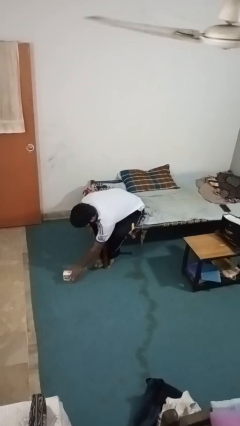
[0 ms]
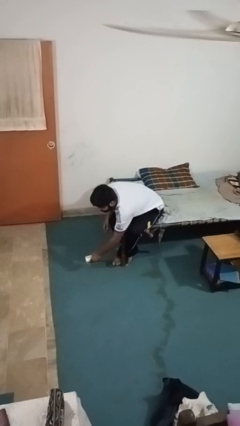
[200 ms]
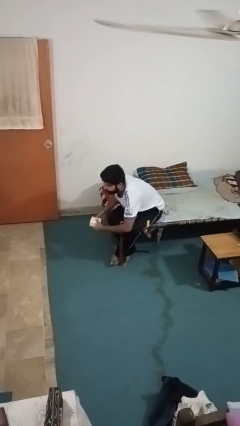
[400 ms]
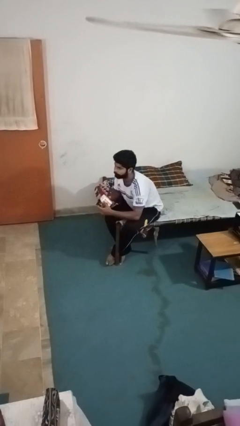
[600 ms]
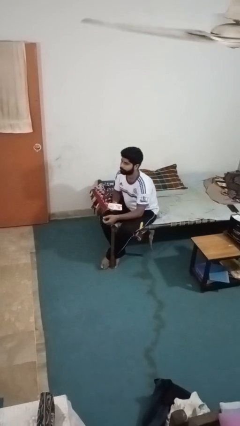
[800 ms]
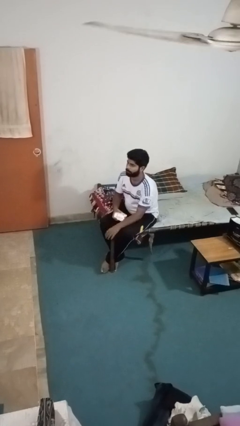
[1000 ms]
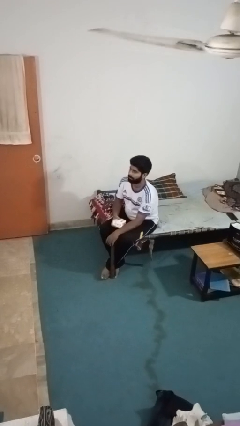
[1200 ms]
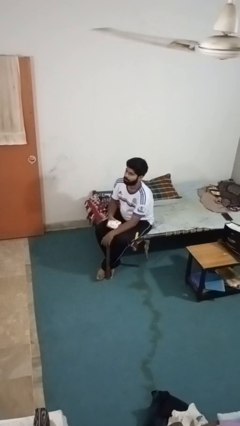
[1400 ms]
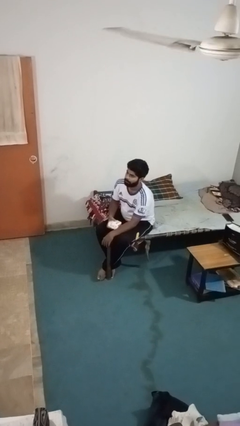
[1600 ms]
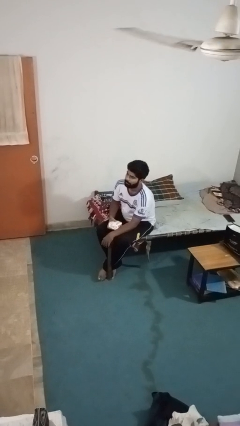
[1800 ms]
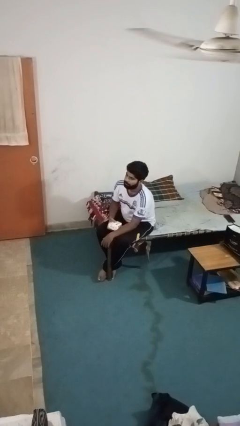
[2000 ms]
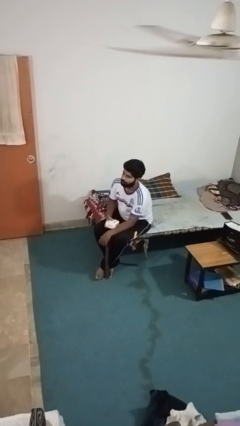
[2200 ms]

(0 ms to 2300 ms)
person picks up object from floor

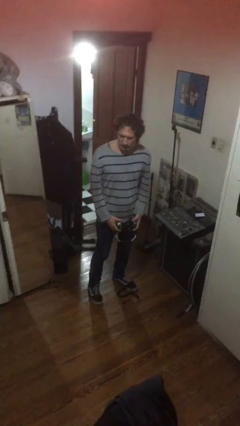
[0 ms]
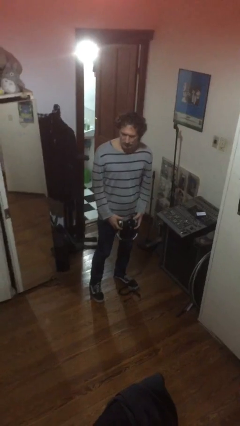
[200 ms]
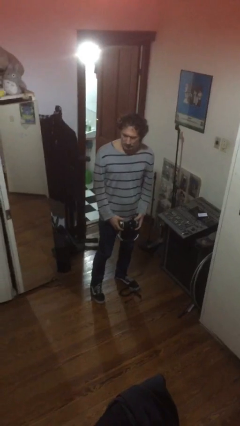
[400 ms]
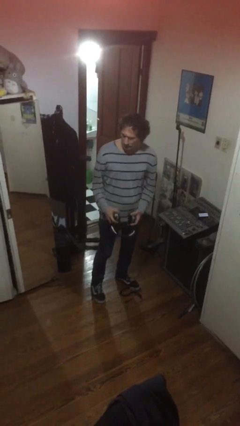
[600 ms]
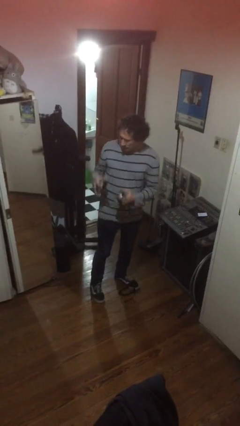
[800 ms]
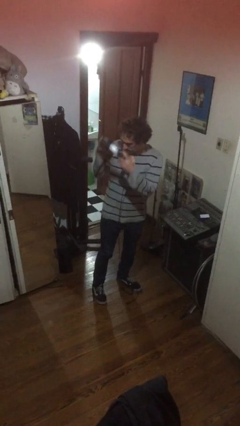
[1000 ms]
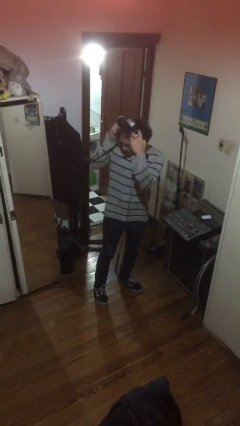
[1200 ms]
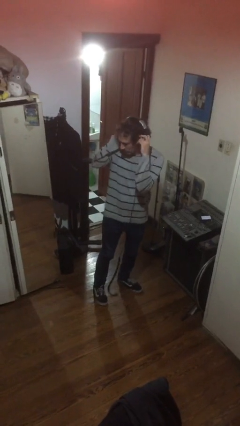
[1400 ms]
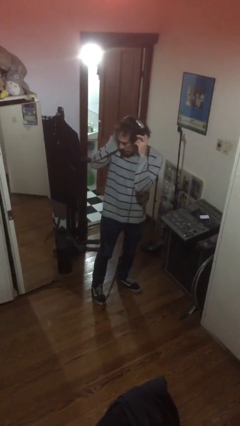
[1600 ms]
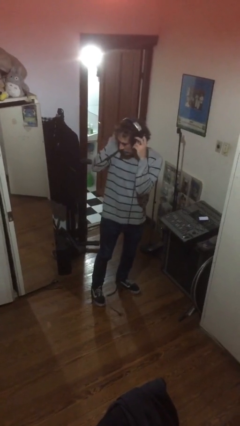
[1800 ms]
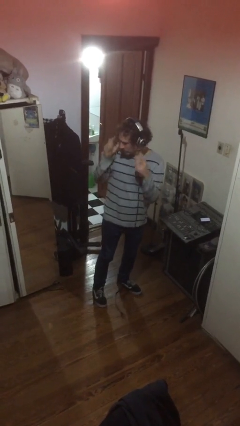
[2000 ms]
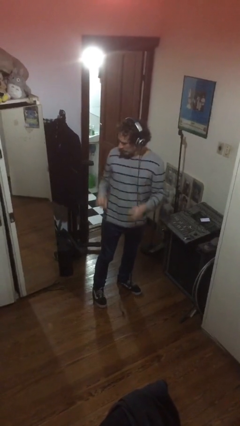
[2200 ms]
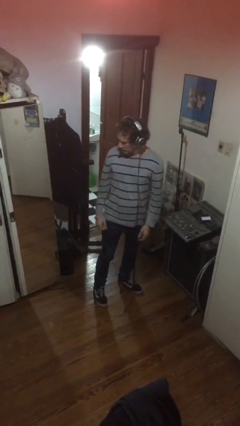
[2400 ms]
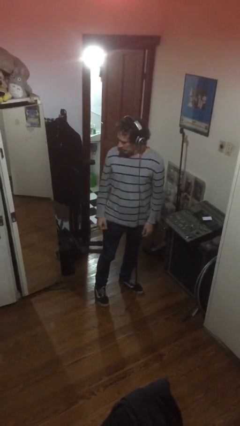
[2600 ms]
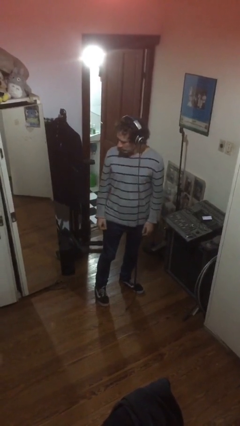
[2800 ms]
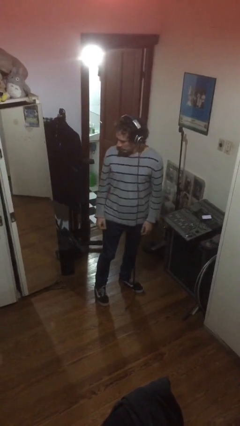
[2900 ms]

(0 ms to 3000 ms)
person puts on headphones

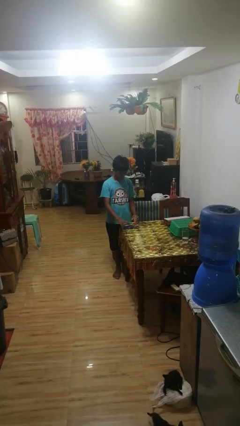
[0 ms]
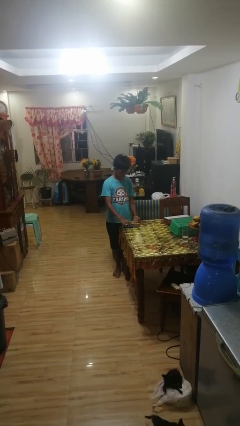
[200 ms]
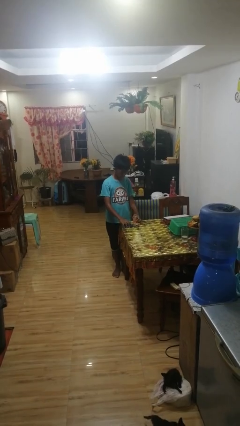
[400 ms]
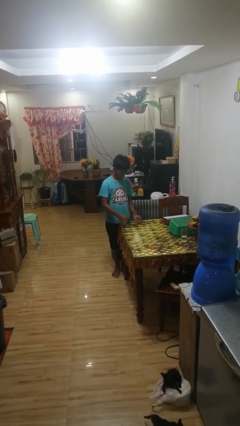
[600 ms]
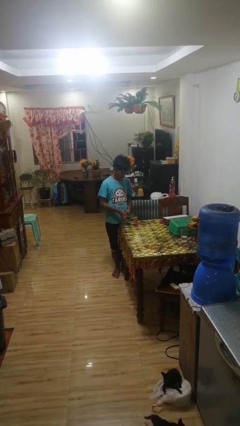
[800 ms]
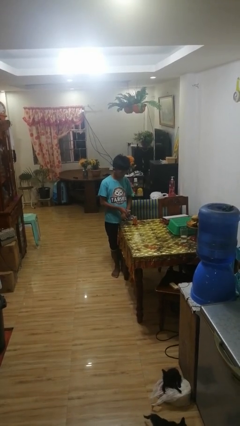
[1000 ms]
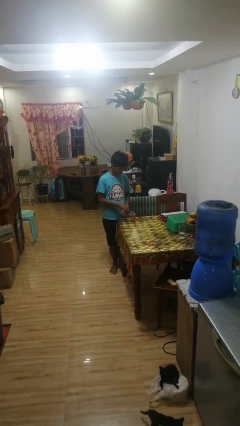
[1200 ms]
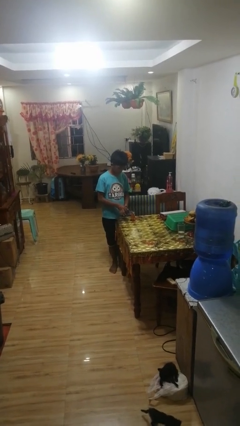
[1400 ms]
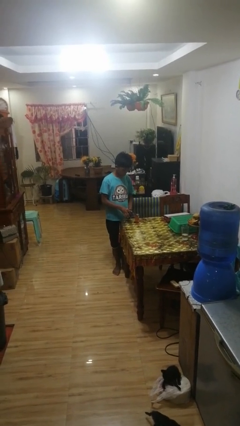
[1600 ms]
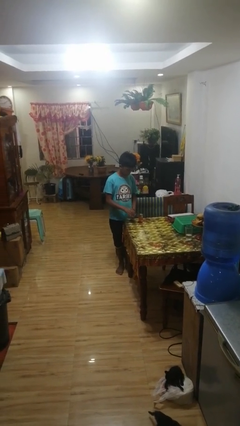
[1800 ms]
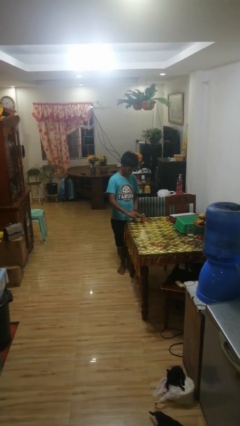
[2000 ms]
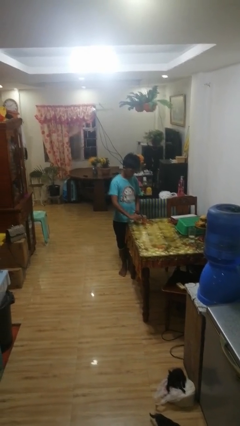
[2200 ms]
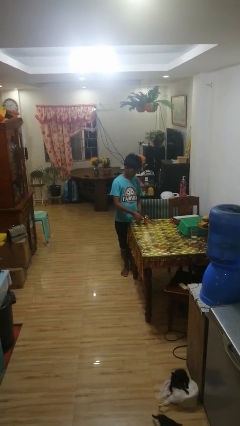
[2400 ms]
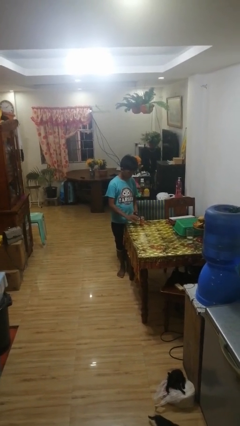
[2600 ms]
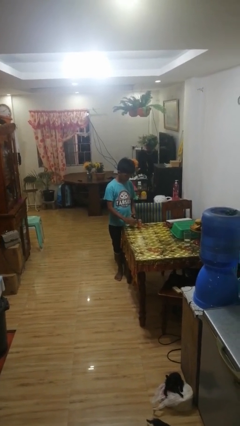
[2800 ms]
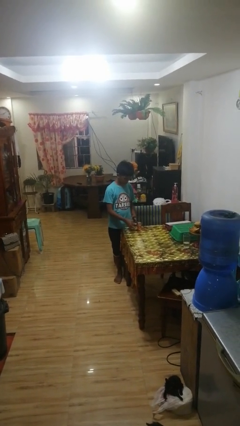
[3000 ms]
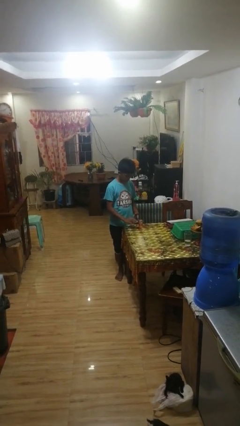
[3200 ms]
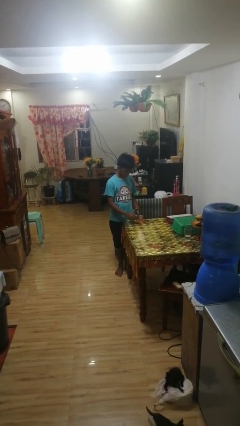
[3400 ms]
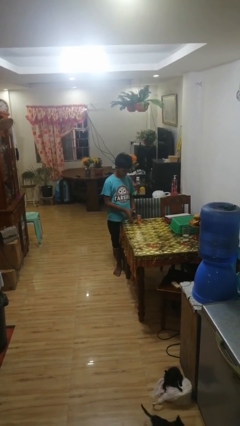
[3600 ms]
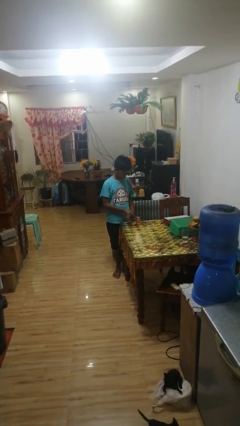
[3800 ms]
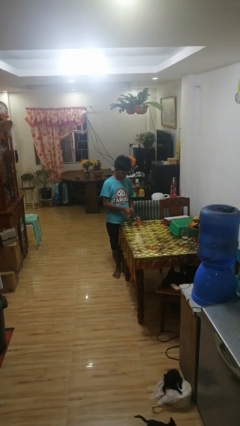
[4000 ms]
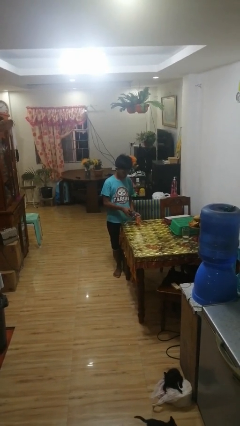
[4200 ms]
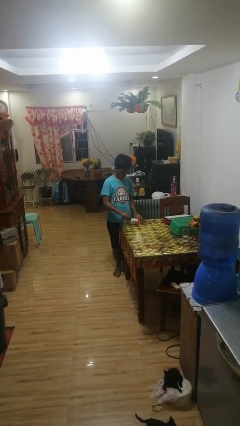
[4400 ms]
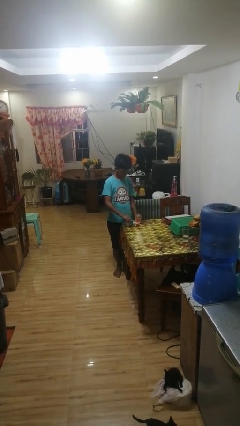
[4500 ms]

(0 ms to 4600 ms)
person opens can with can opener

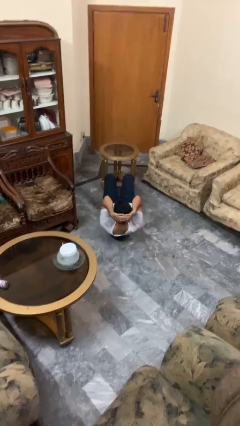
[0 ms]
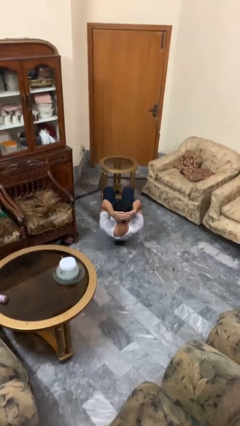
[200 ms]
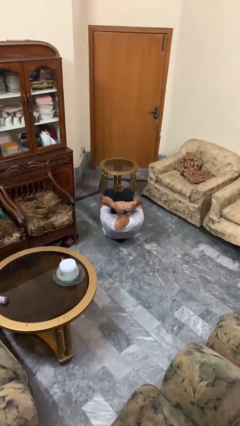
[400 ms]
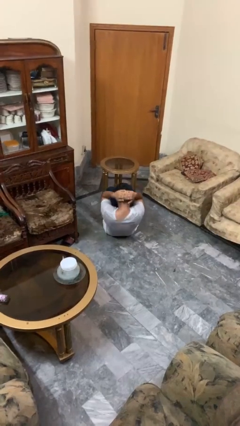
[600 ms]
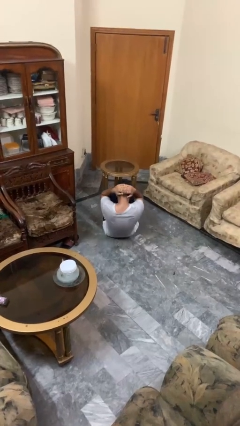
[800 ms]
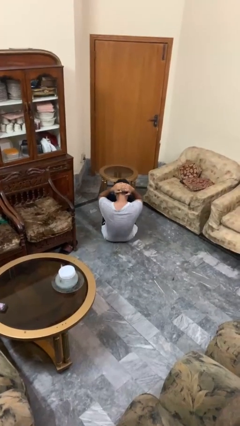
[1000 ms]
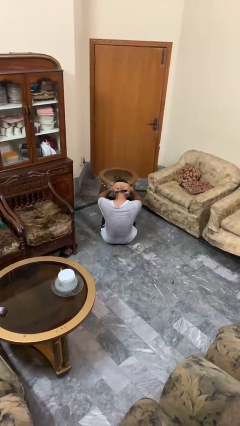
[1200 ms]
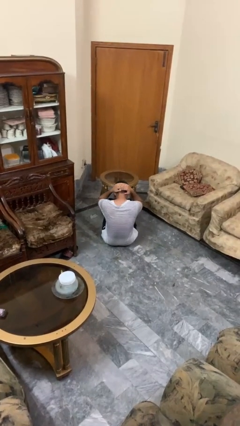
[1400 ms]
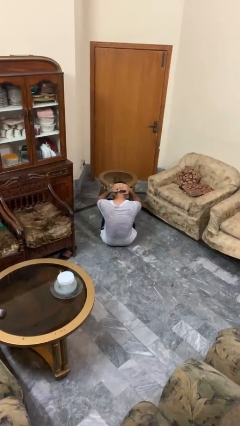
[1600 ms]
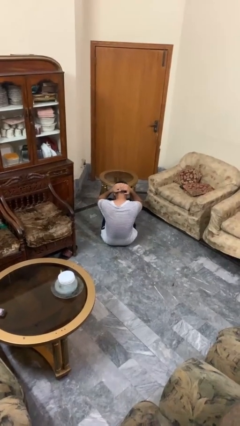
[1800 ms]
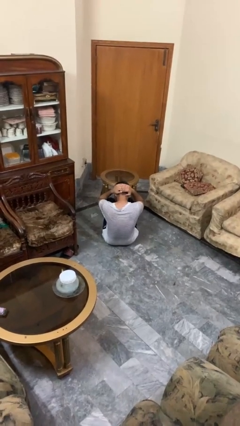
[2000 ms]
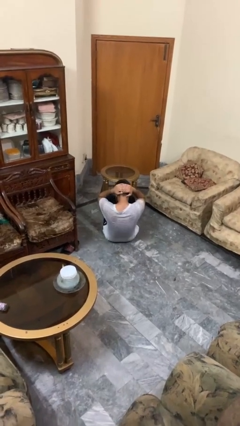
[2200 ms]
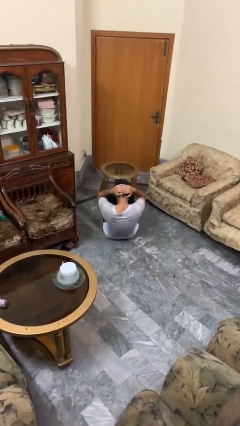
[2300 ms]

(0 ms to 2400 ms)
person exercises with situp

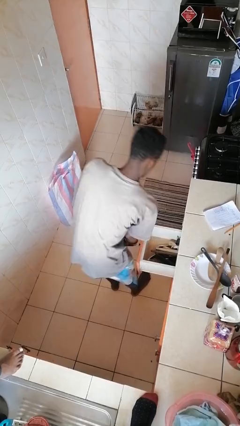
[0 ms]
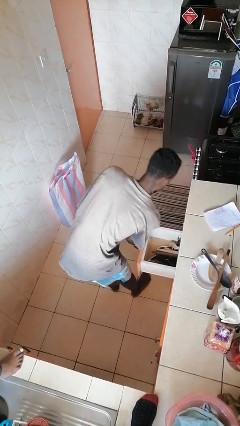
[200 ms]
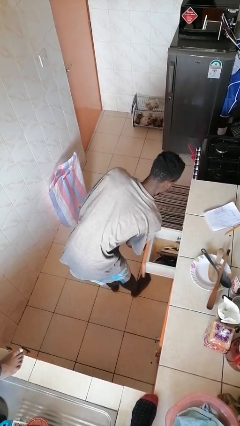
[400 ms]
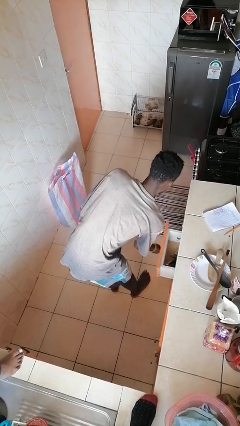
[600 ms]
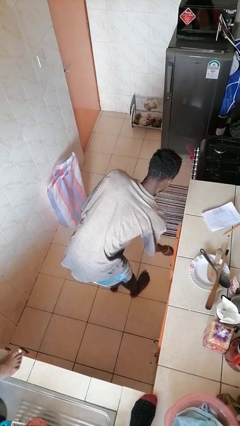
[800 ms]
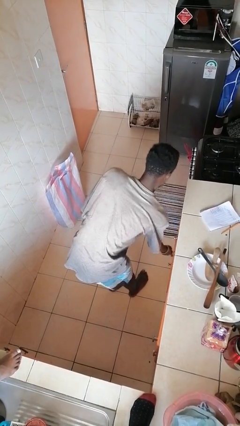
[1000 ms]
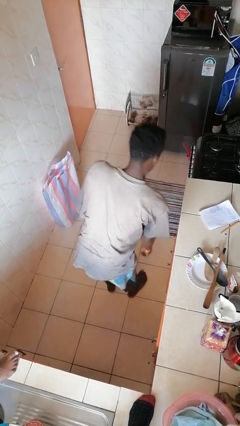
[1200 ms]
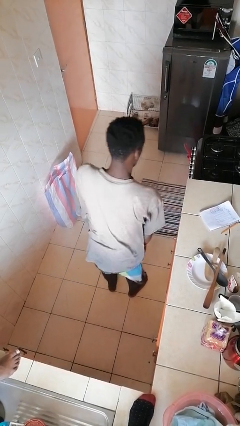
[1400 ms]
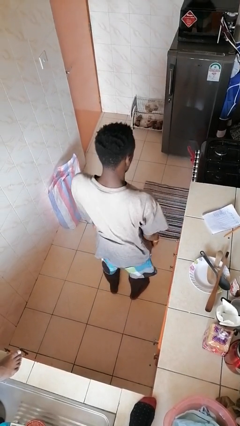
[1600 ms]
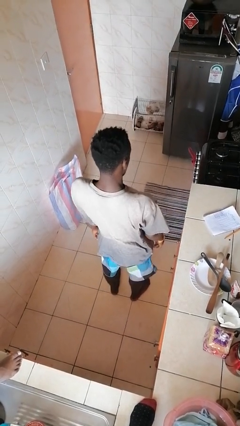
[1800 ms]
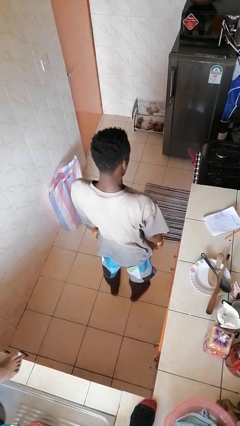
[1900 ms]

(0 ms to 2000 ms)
person closes kitchen drawer

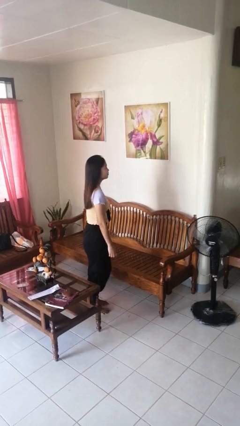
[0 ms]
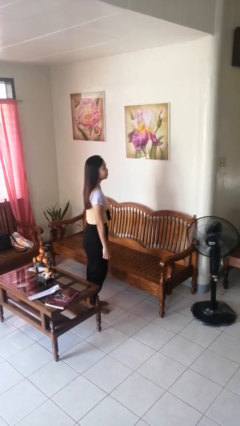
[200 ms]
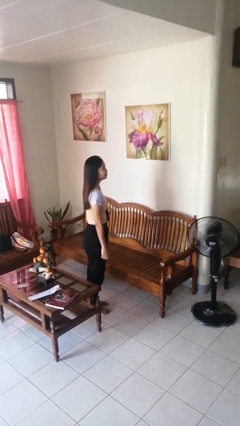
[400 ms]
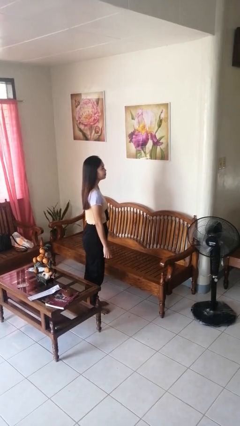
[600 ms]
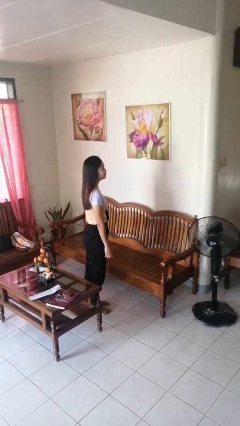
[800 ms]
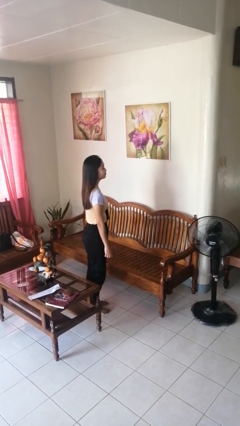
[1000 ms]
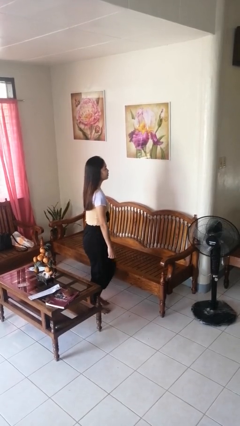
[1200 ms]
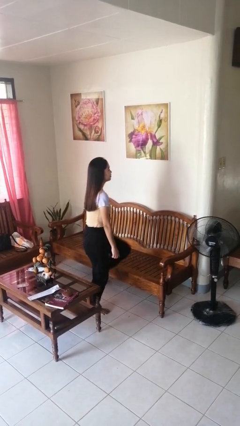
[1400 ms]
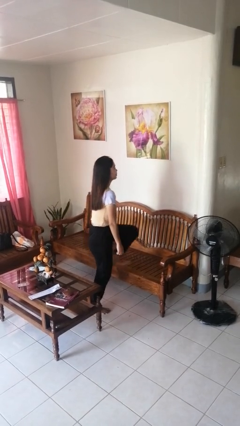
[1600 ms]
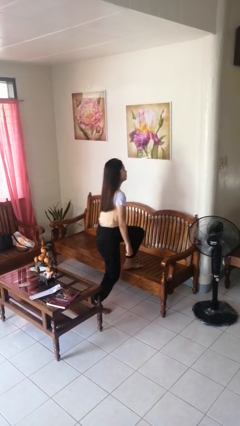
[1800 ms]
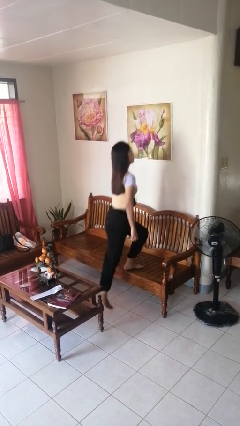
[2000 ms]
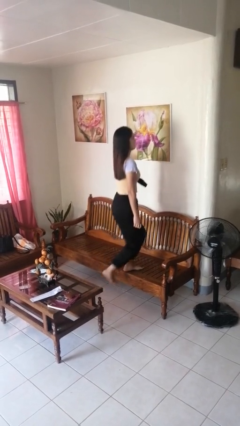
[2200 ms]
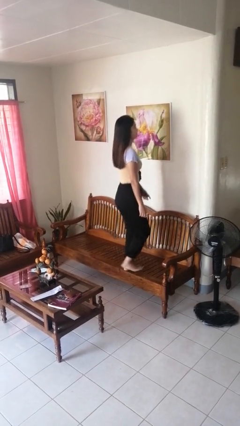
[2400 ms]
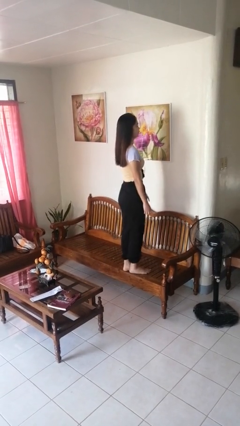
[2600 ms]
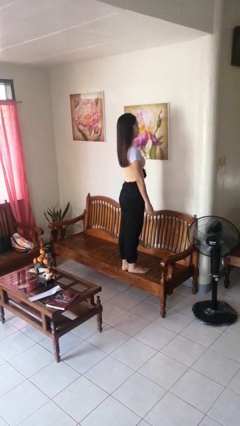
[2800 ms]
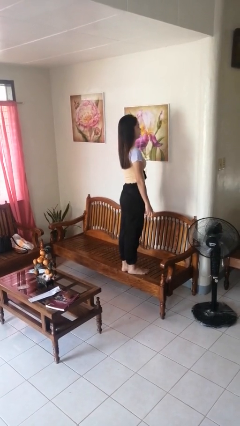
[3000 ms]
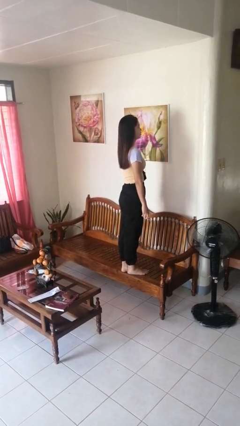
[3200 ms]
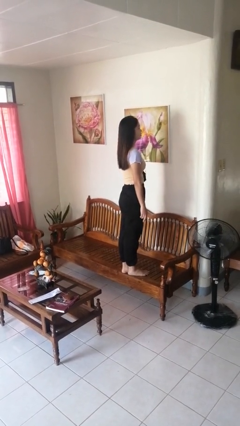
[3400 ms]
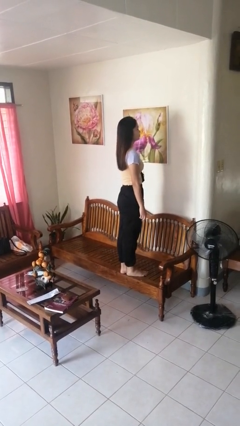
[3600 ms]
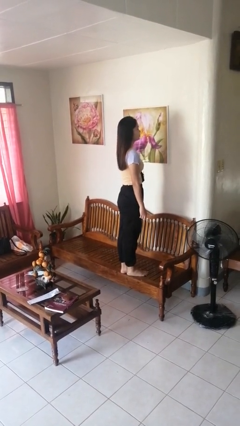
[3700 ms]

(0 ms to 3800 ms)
person climbs on chair
